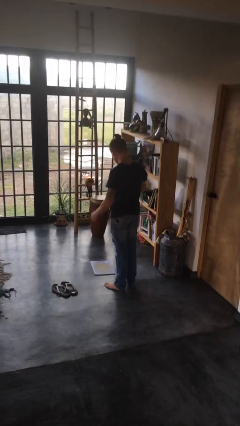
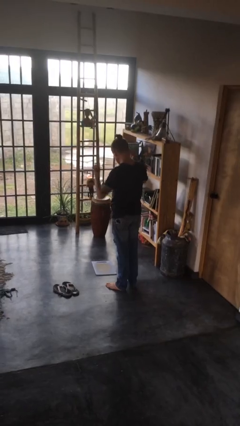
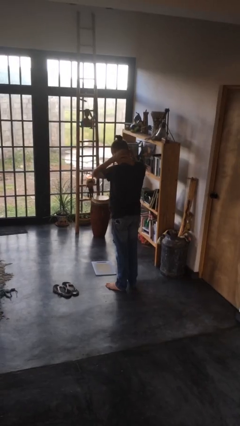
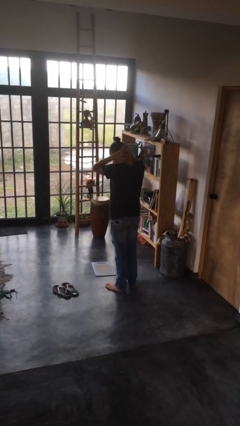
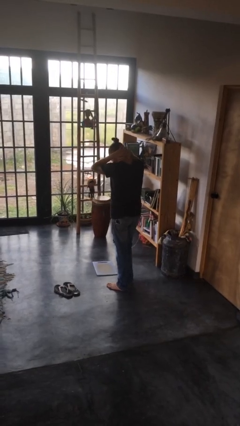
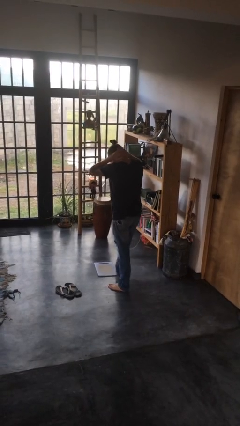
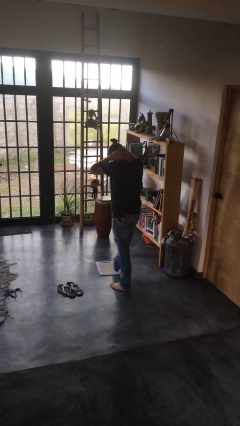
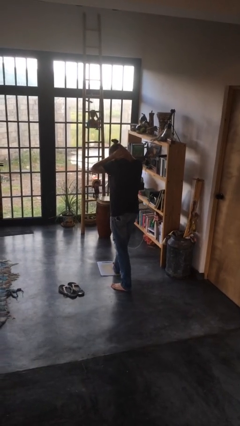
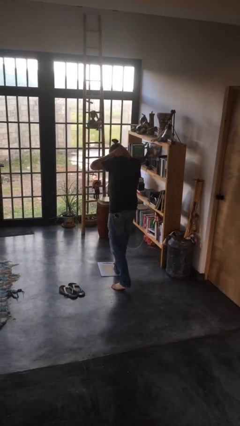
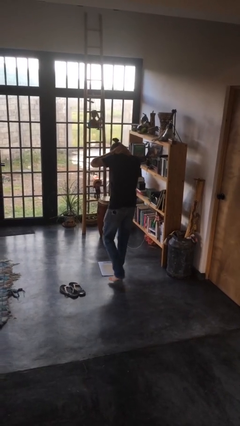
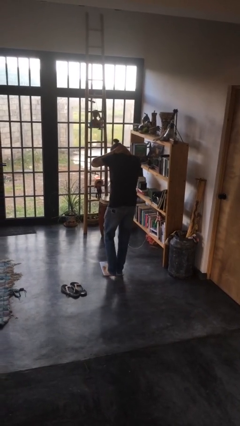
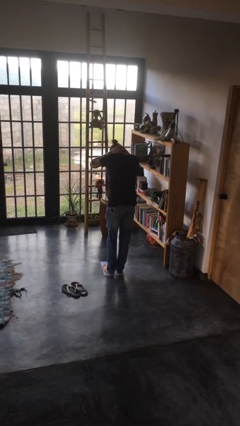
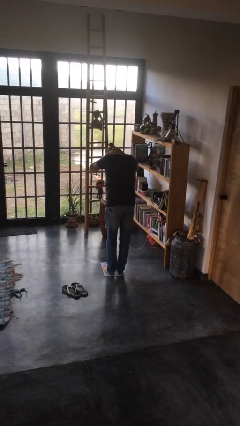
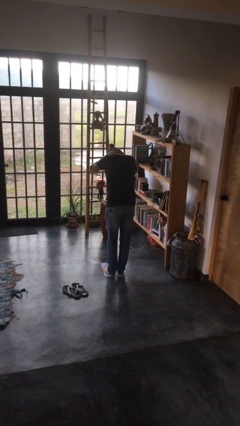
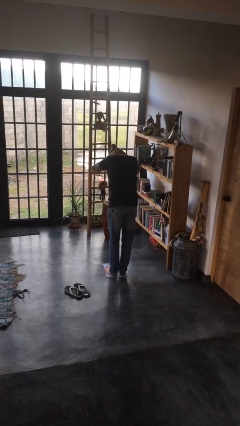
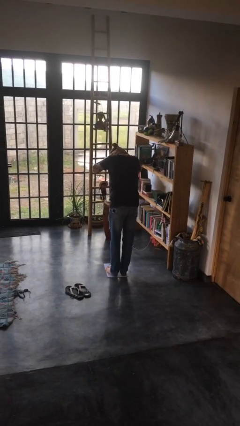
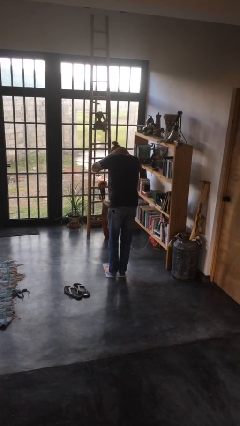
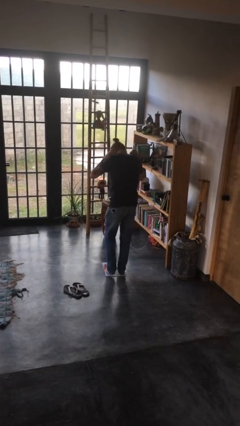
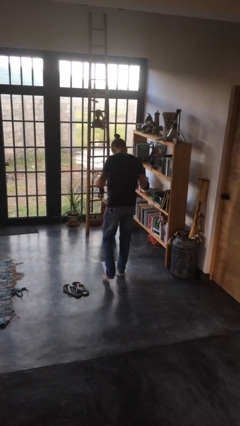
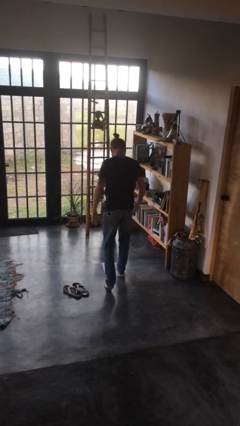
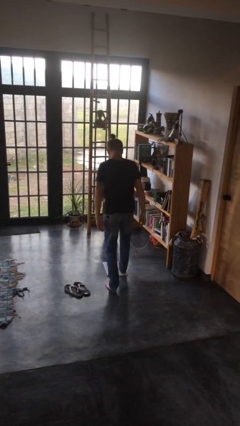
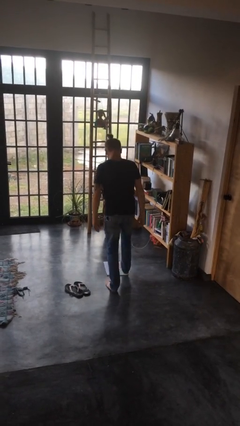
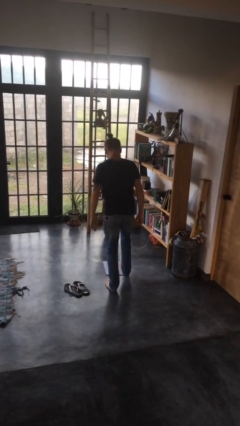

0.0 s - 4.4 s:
person uses bodyweight scale

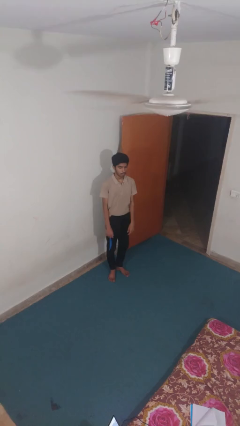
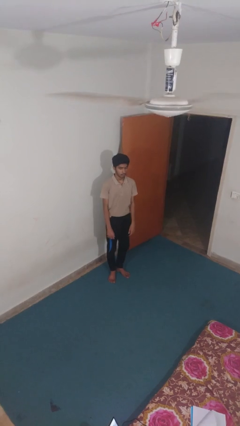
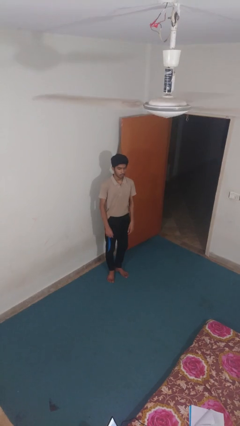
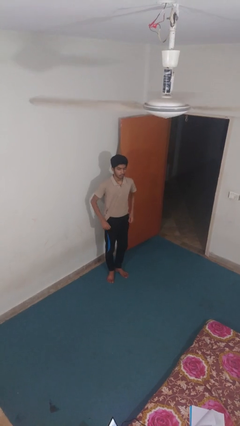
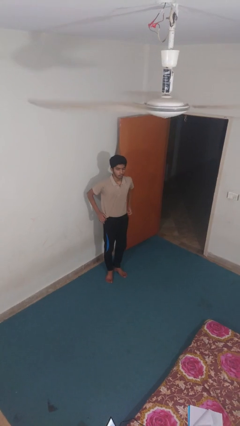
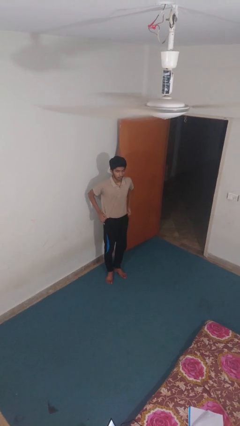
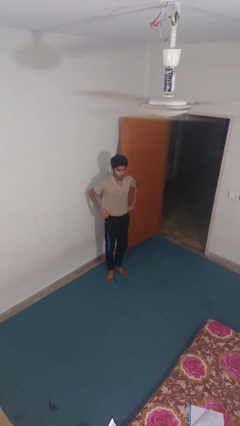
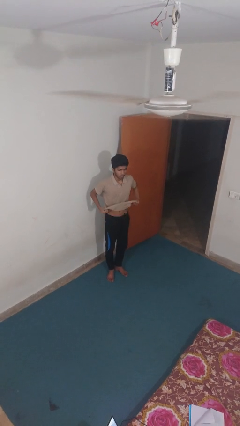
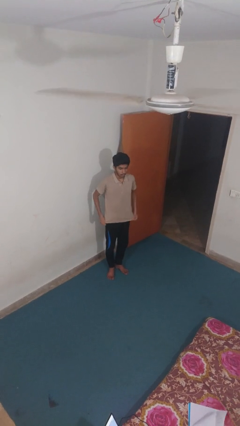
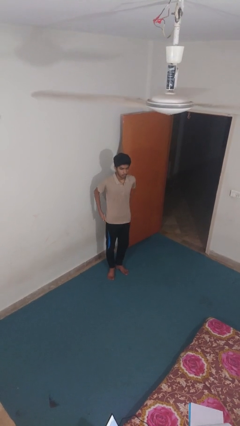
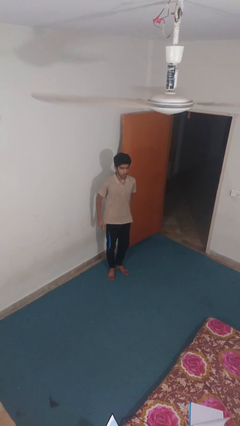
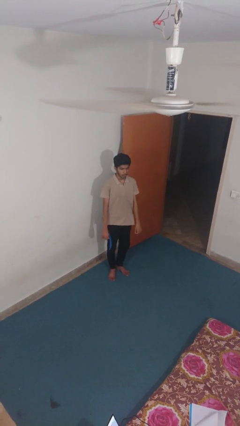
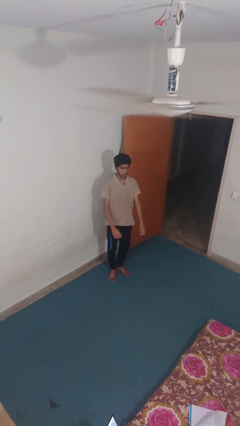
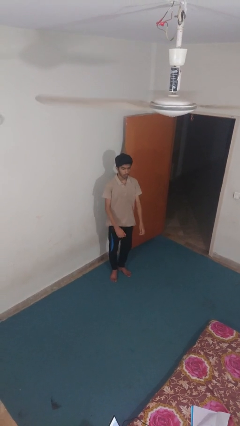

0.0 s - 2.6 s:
person untucks shirt

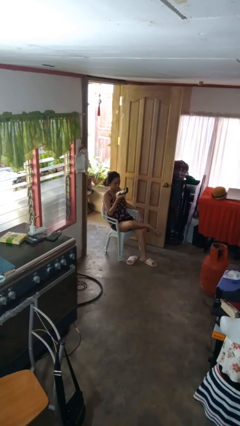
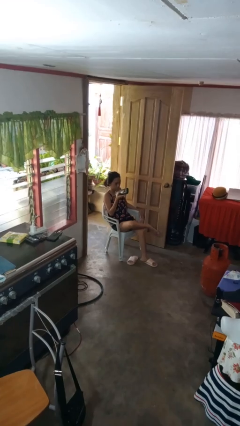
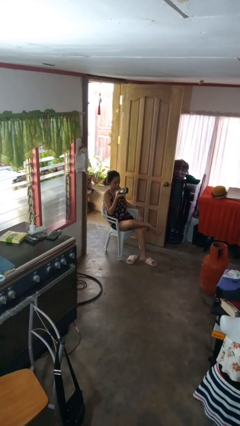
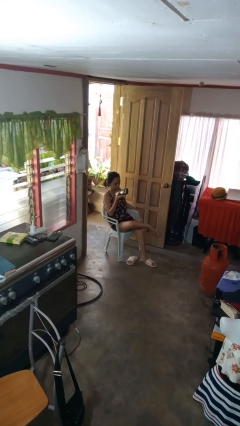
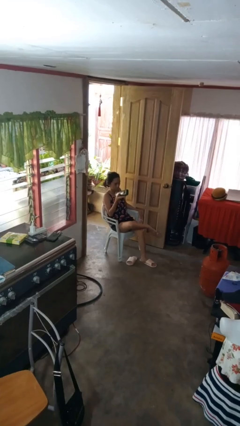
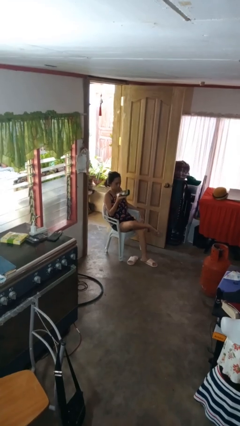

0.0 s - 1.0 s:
person uses television remote

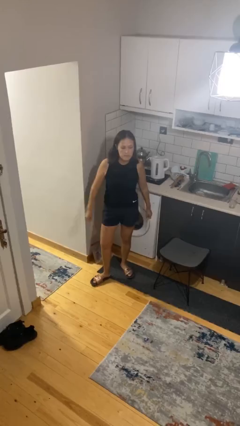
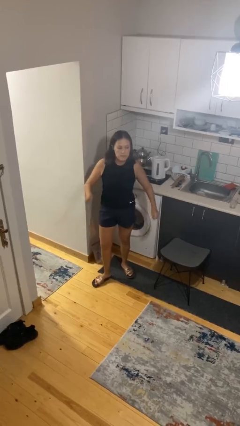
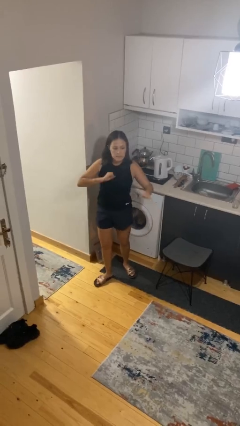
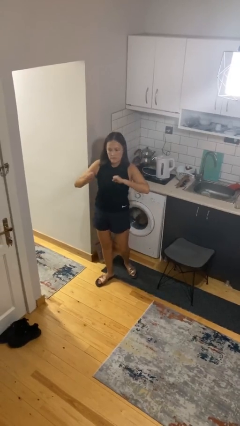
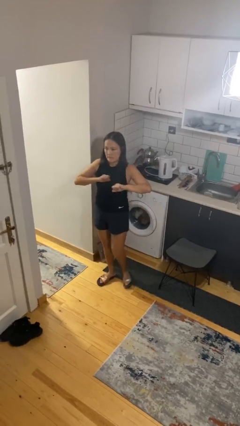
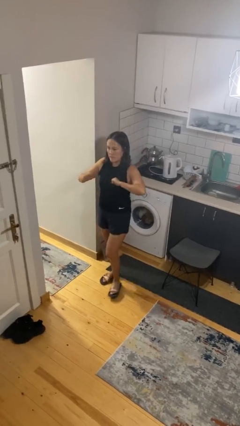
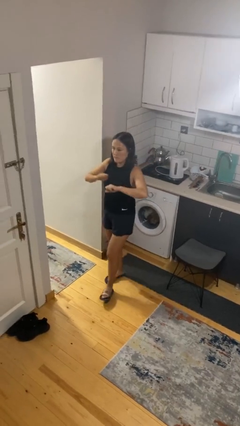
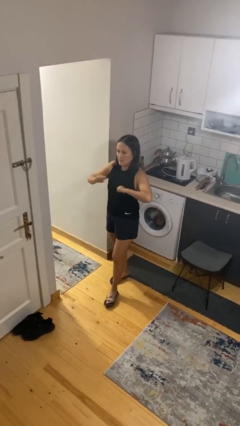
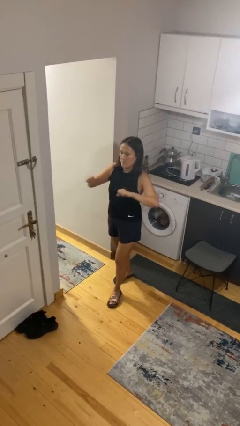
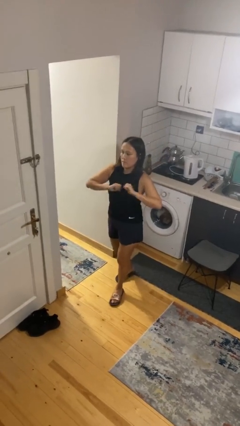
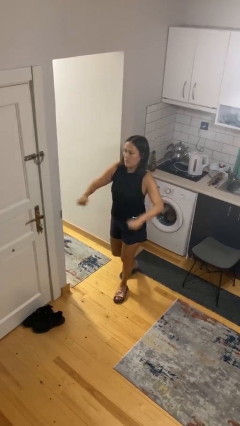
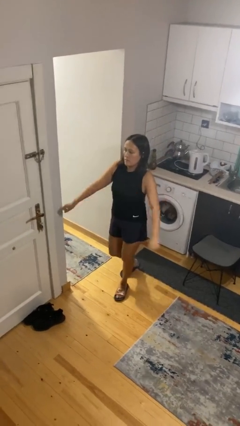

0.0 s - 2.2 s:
person drums on chest

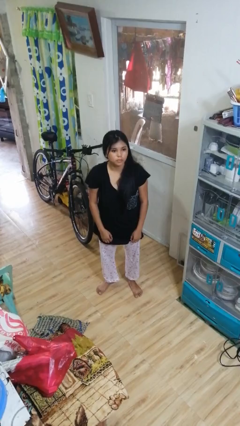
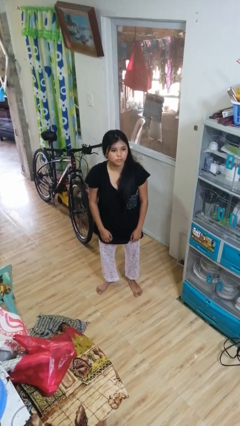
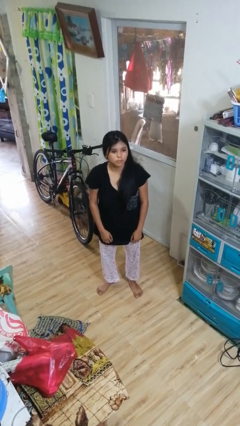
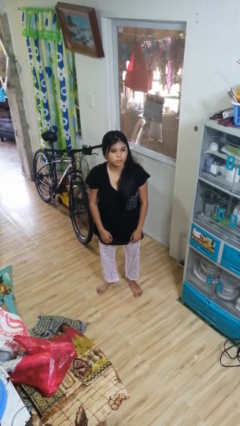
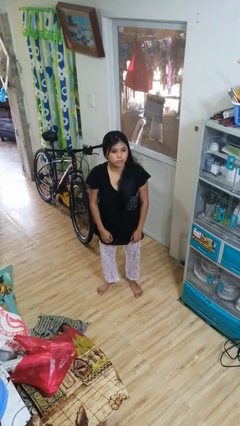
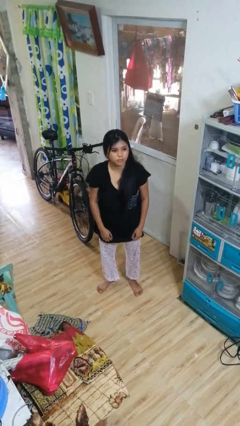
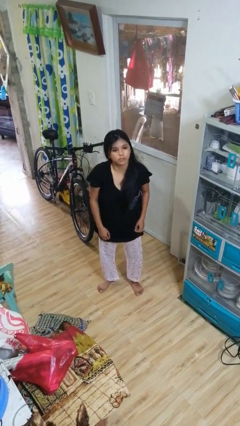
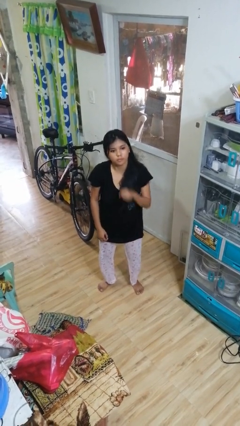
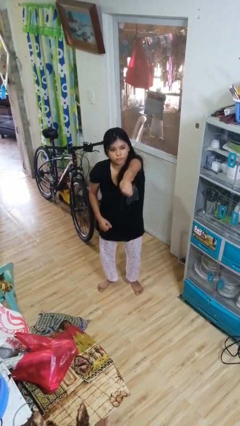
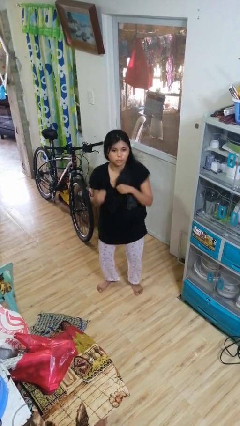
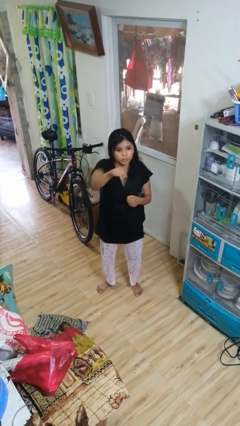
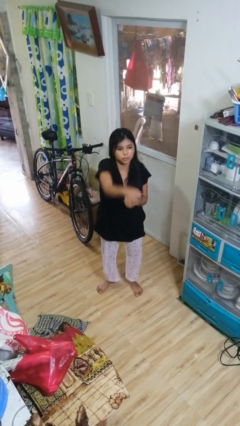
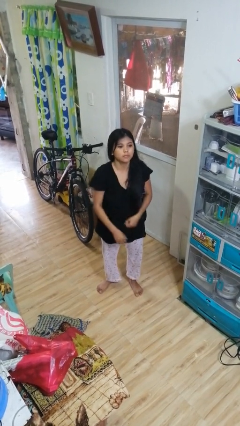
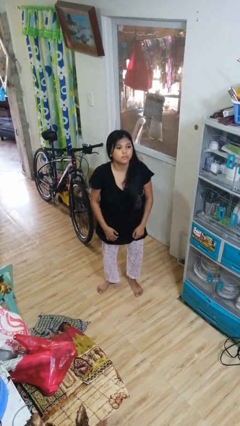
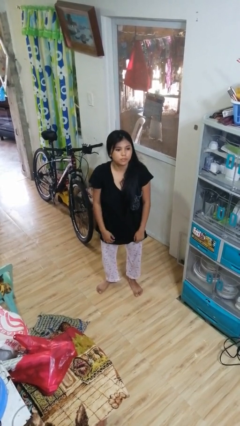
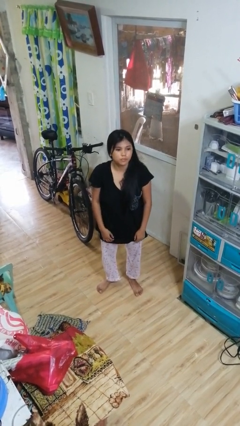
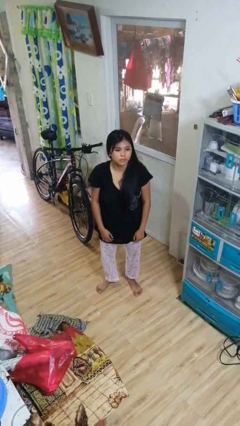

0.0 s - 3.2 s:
person punches

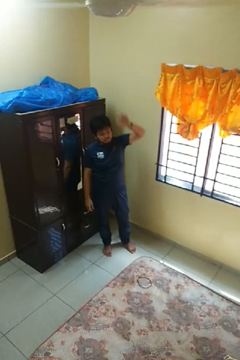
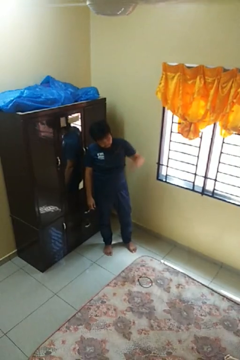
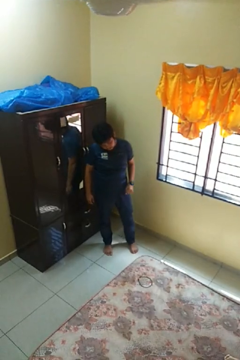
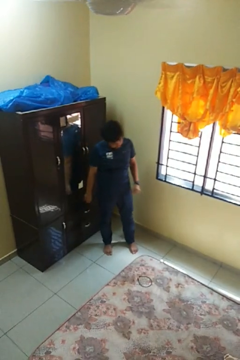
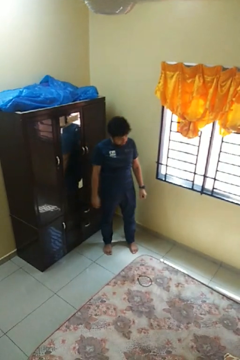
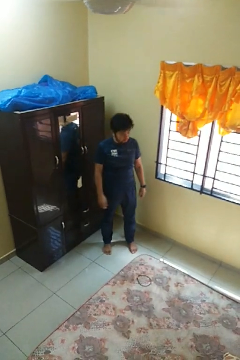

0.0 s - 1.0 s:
person gestures lower hand

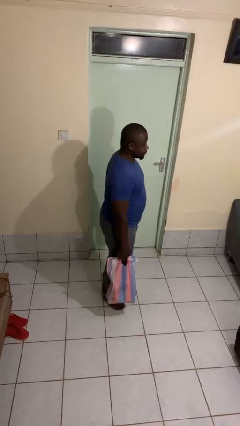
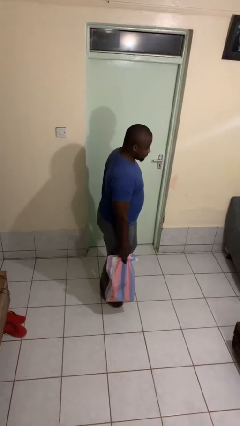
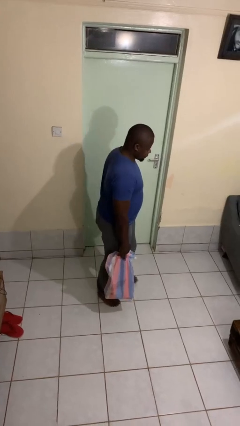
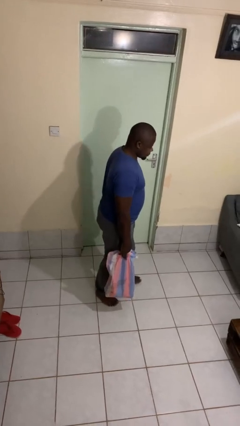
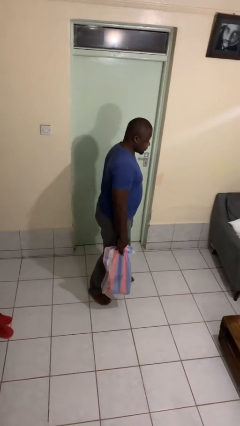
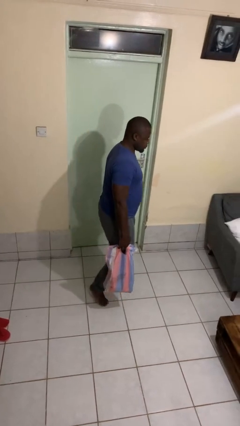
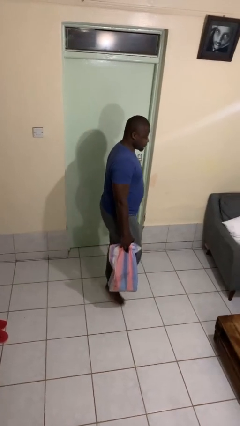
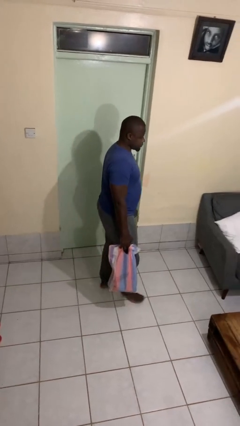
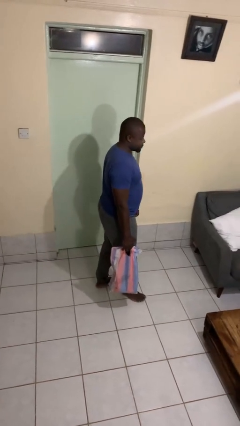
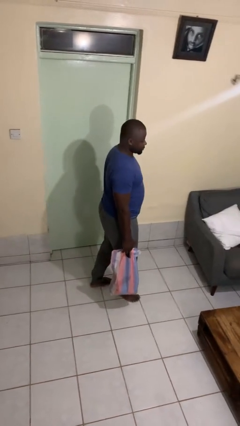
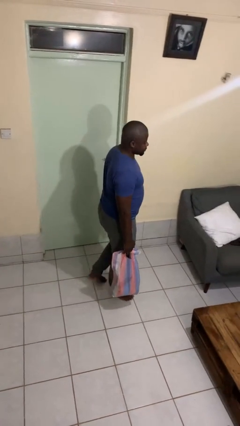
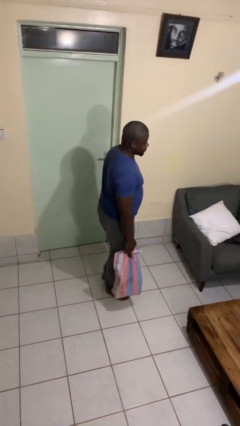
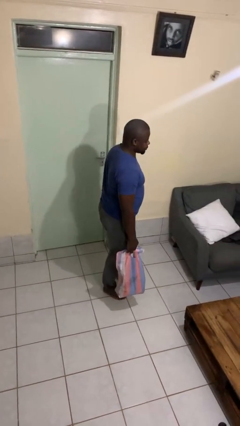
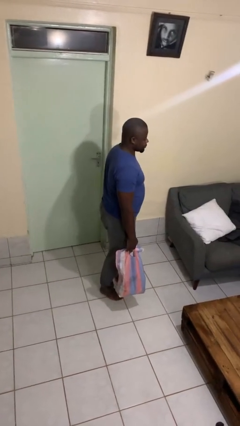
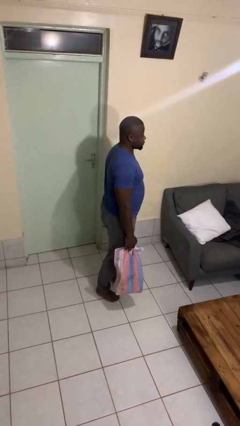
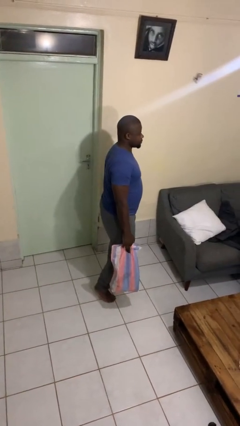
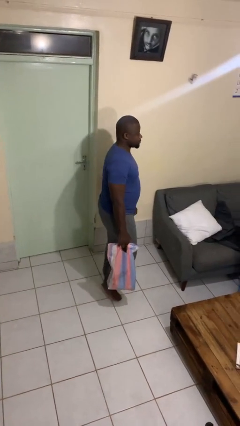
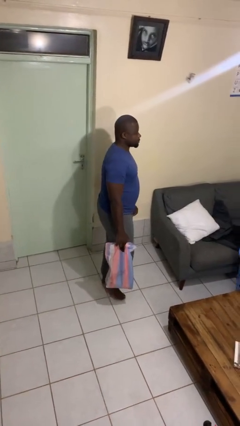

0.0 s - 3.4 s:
person carries groceries
